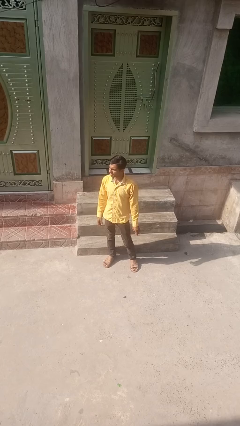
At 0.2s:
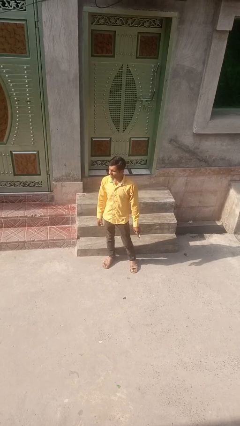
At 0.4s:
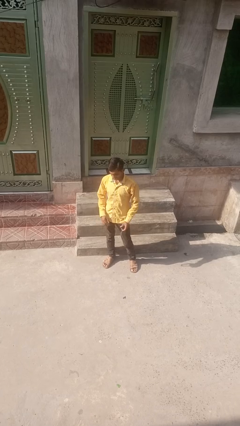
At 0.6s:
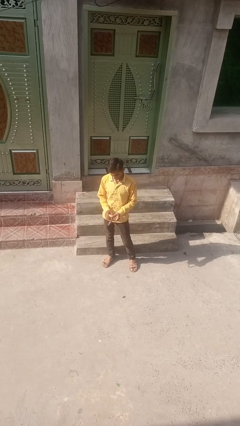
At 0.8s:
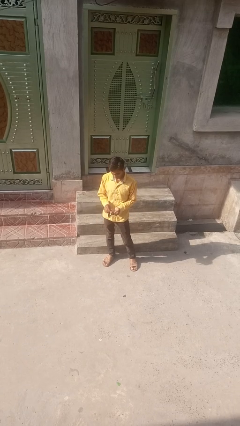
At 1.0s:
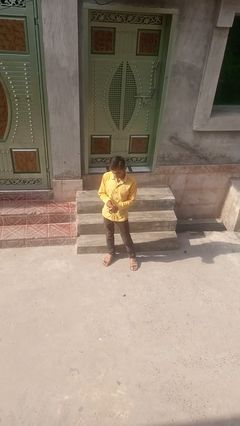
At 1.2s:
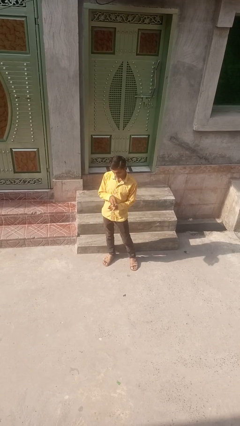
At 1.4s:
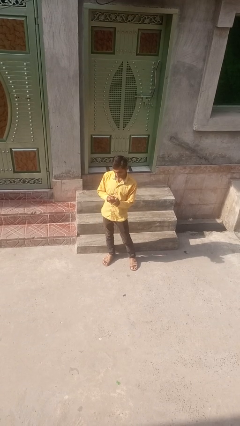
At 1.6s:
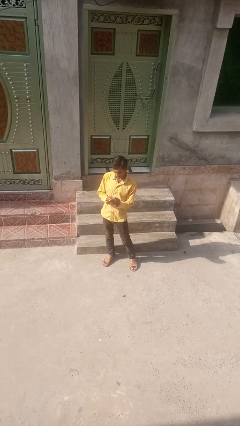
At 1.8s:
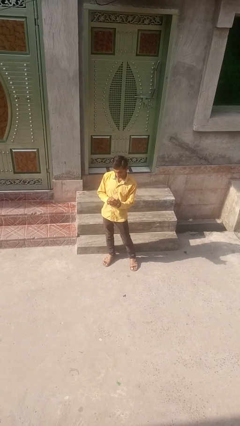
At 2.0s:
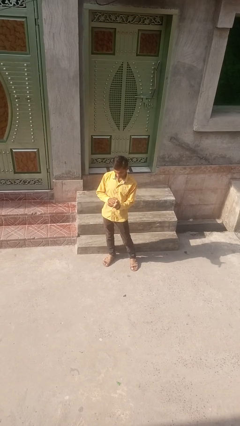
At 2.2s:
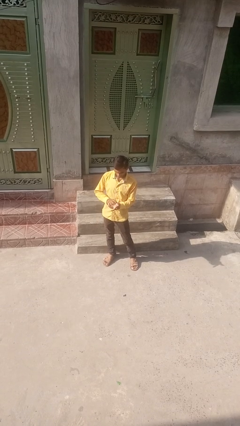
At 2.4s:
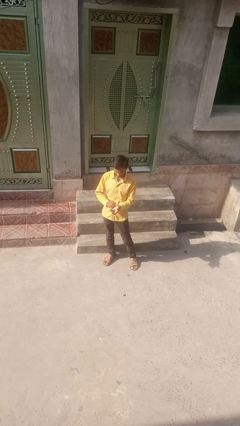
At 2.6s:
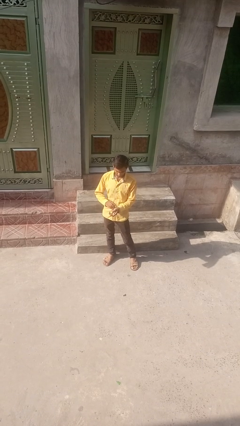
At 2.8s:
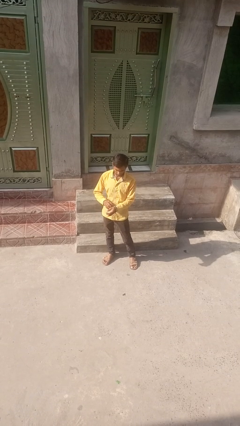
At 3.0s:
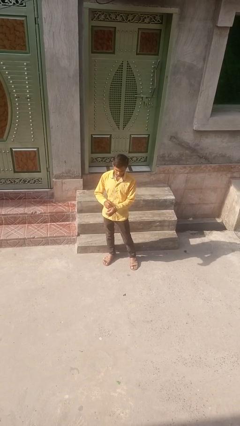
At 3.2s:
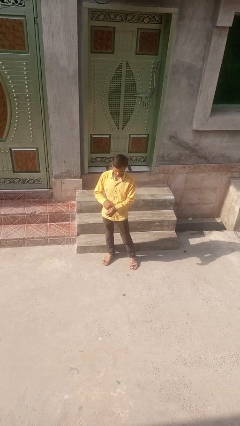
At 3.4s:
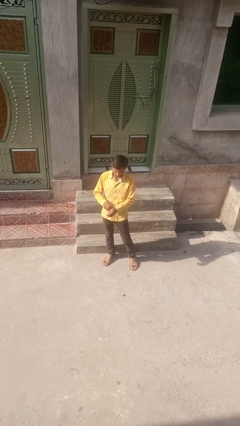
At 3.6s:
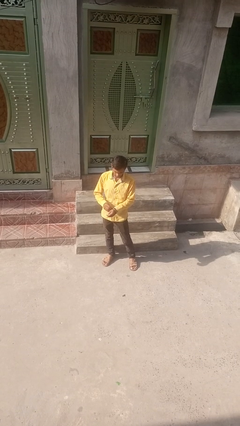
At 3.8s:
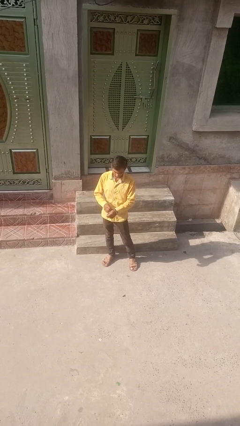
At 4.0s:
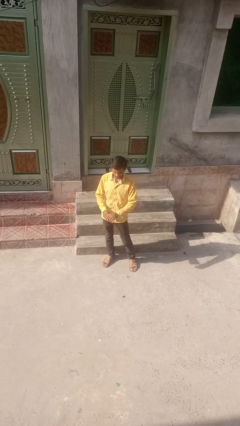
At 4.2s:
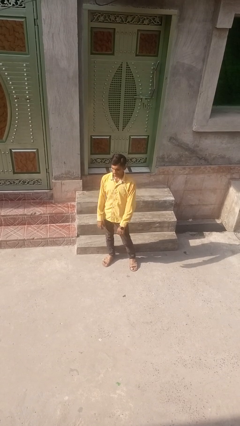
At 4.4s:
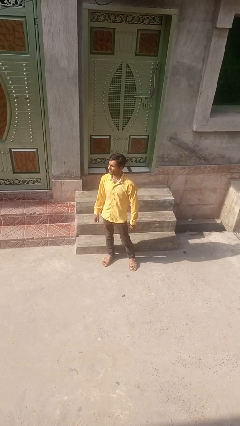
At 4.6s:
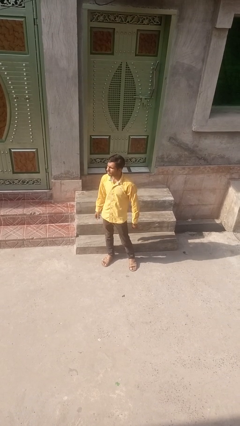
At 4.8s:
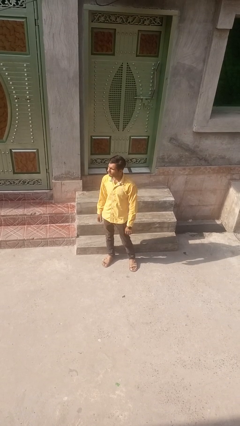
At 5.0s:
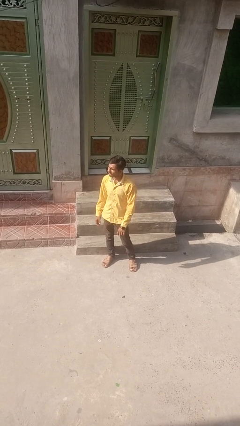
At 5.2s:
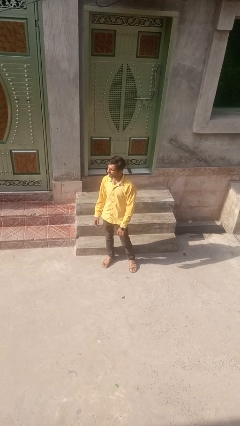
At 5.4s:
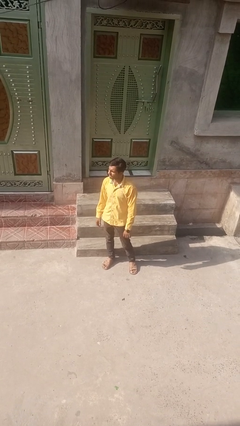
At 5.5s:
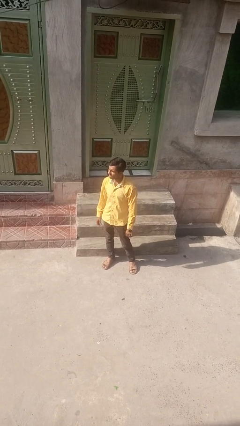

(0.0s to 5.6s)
person puts on wristwatch

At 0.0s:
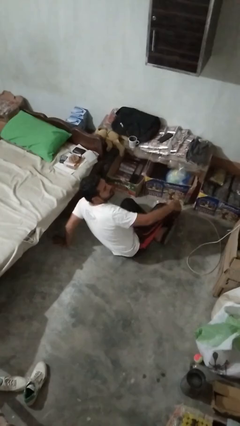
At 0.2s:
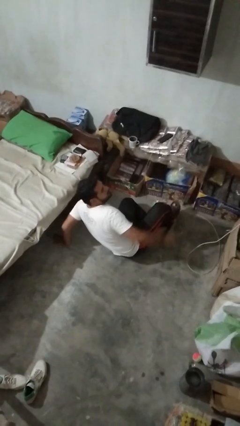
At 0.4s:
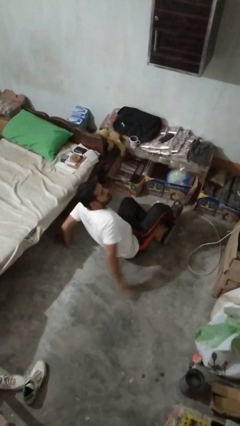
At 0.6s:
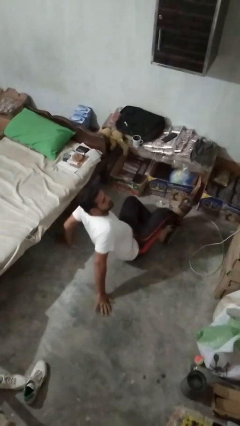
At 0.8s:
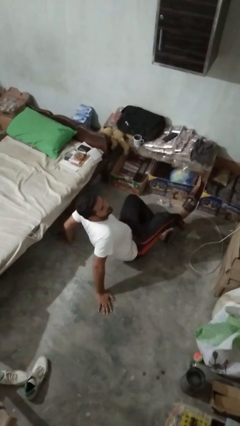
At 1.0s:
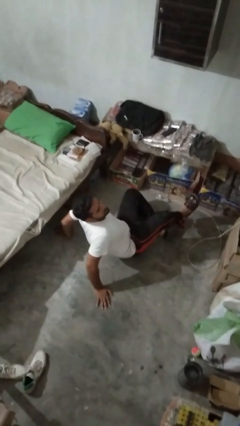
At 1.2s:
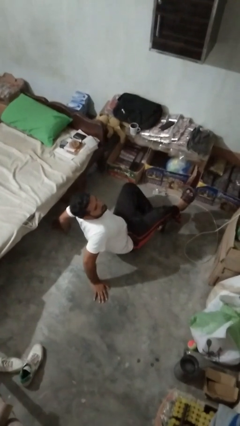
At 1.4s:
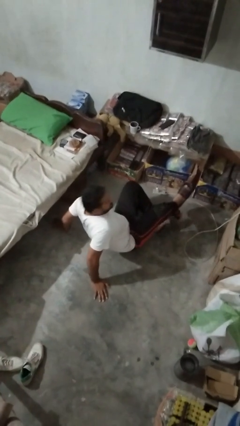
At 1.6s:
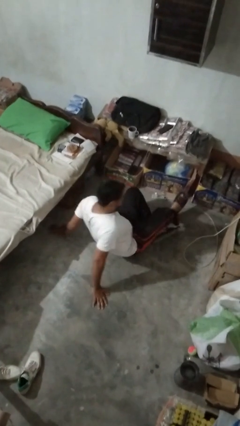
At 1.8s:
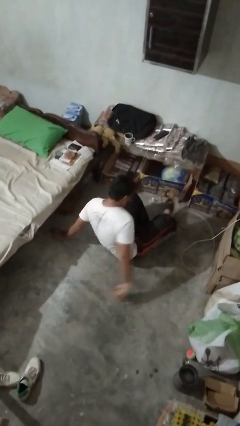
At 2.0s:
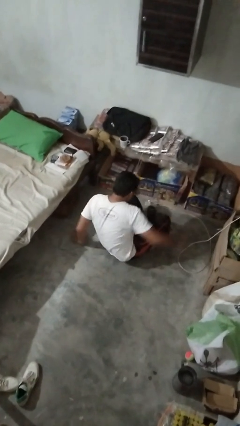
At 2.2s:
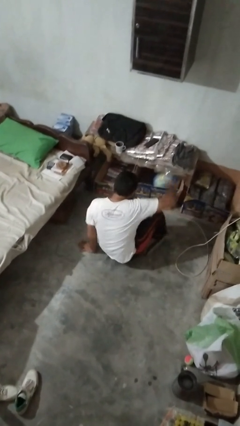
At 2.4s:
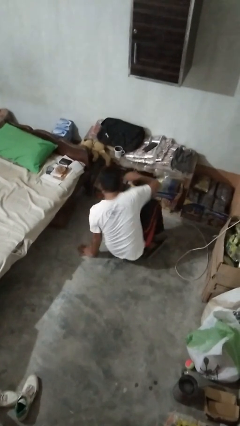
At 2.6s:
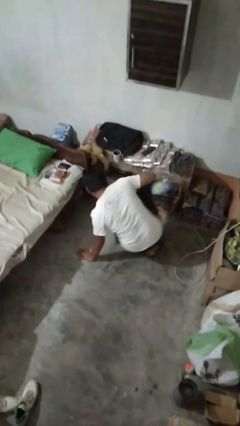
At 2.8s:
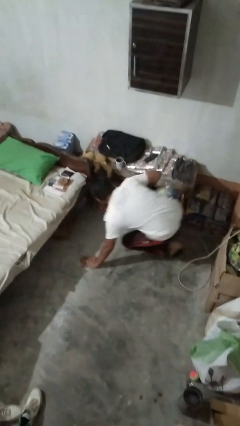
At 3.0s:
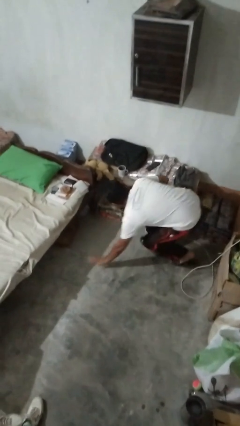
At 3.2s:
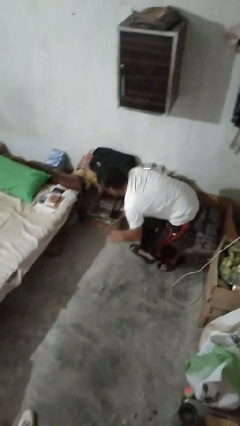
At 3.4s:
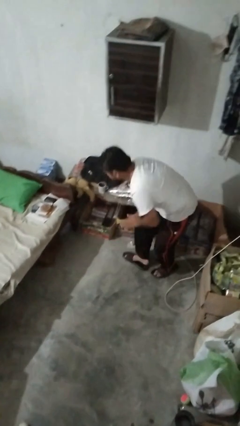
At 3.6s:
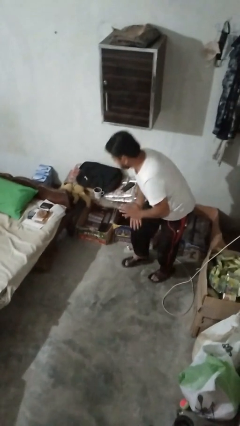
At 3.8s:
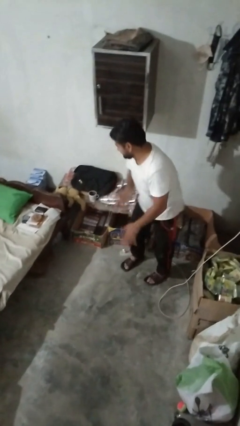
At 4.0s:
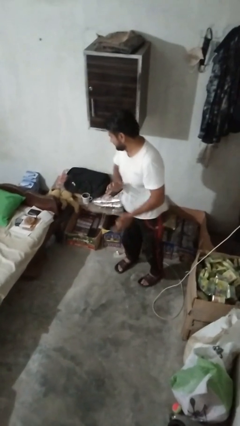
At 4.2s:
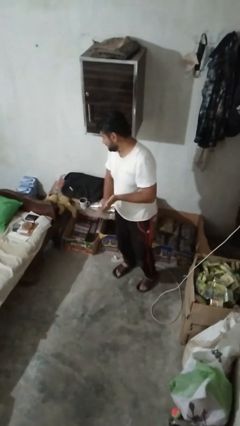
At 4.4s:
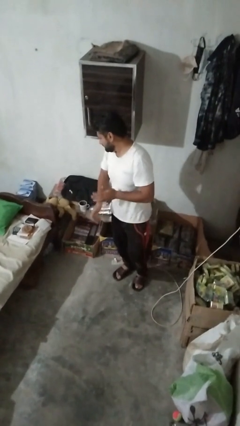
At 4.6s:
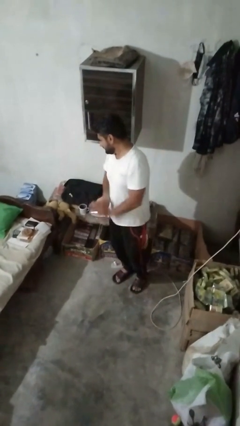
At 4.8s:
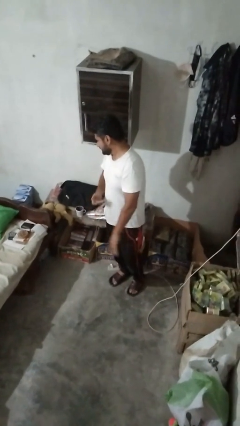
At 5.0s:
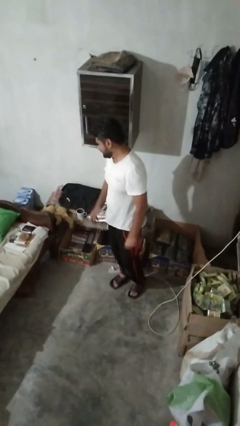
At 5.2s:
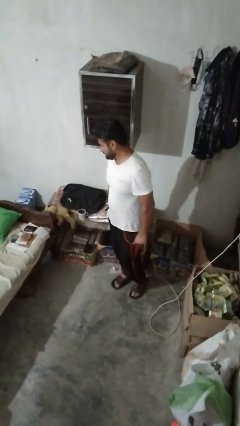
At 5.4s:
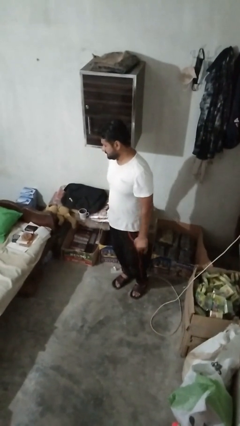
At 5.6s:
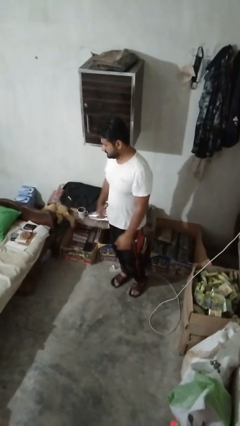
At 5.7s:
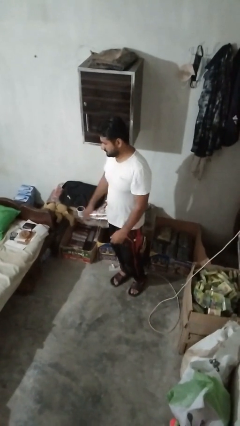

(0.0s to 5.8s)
person stands up from floor

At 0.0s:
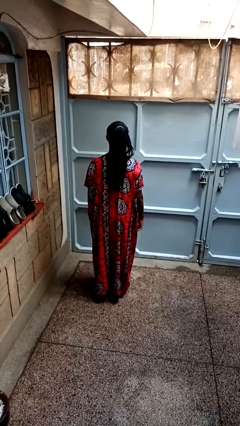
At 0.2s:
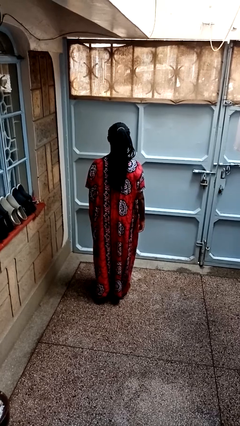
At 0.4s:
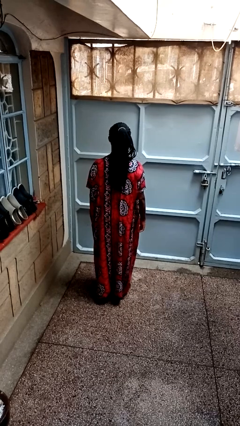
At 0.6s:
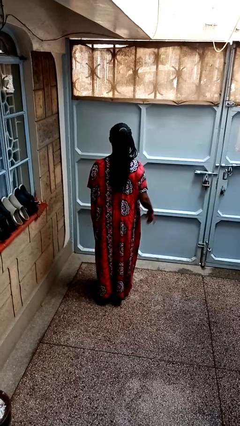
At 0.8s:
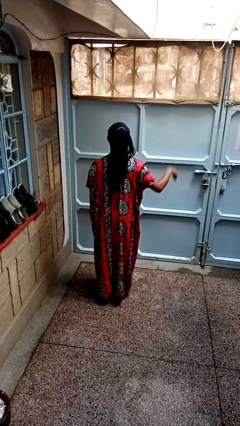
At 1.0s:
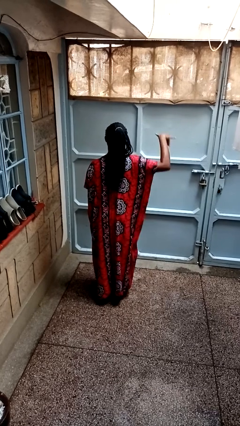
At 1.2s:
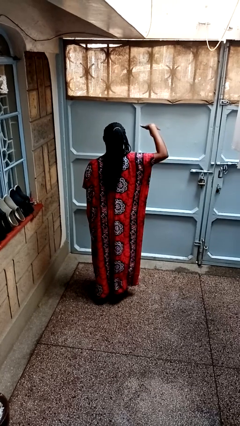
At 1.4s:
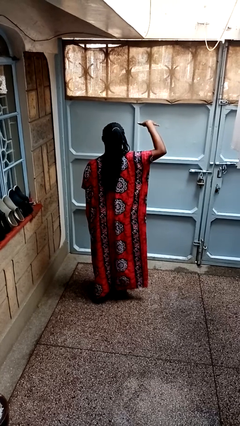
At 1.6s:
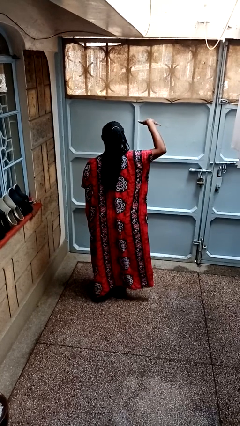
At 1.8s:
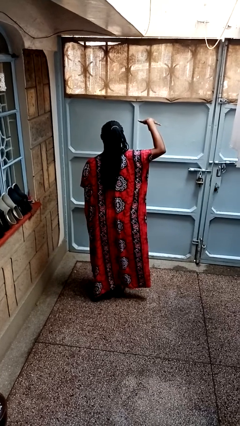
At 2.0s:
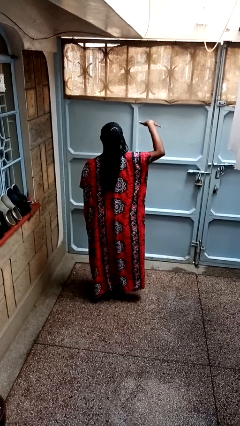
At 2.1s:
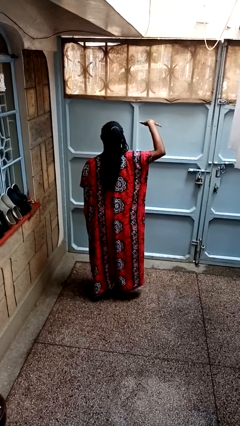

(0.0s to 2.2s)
person gestures hang loose

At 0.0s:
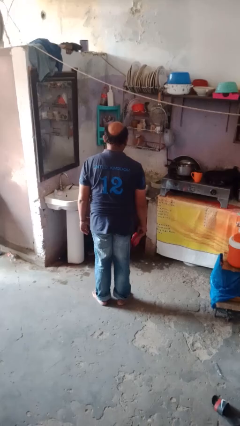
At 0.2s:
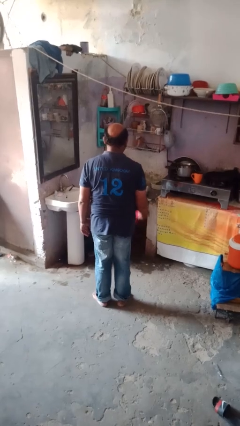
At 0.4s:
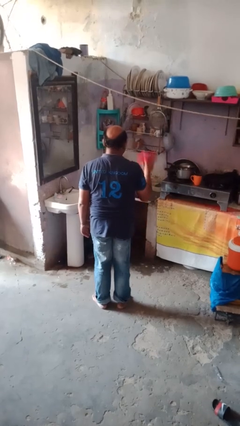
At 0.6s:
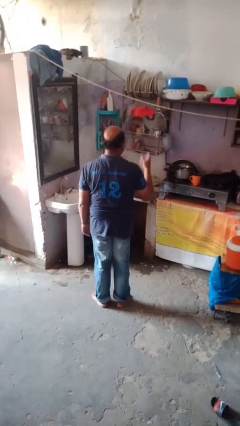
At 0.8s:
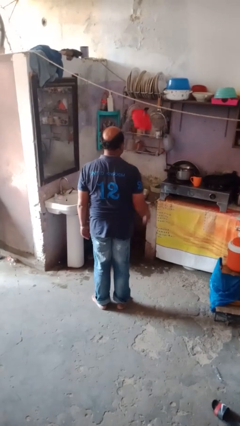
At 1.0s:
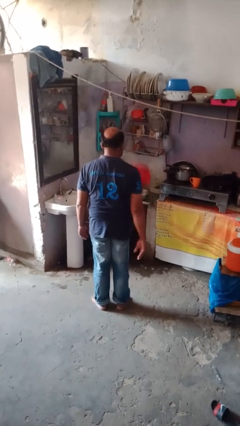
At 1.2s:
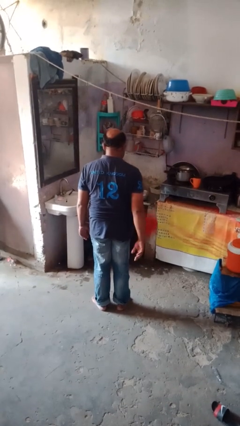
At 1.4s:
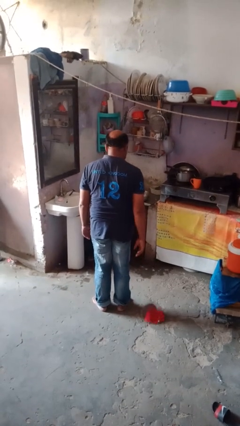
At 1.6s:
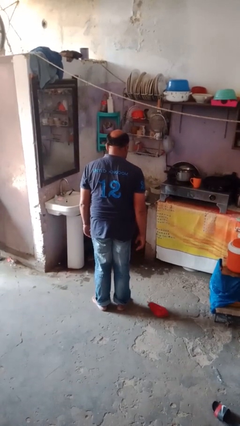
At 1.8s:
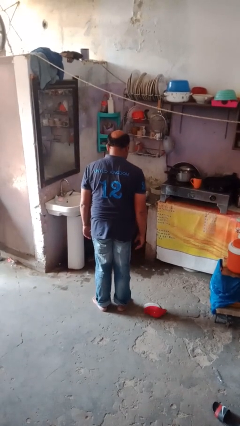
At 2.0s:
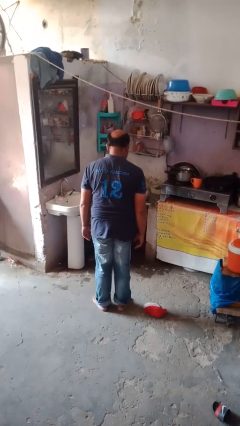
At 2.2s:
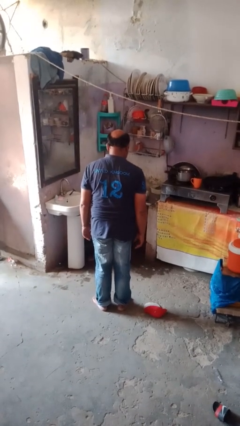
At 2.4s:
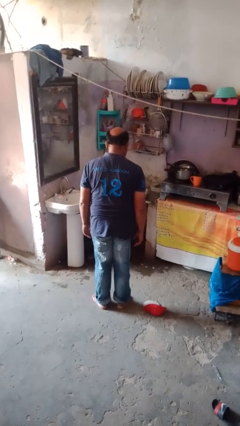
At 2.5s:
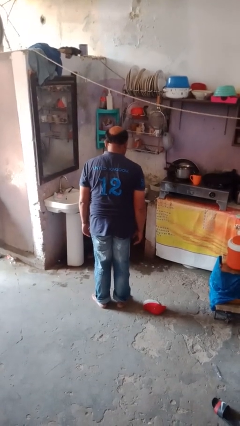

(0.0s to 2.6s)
person throws object into air

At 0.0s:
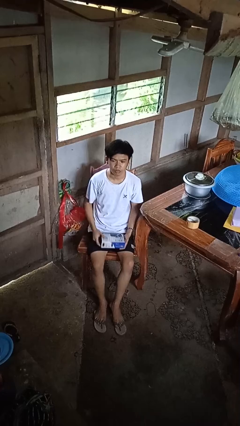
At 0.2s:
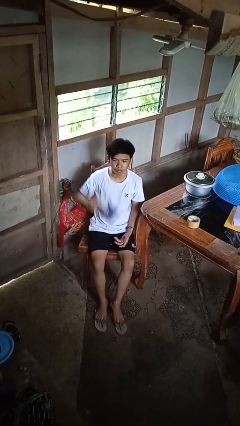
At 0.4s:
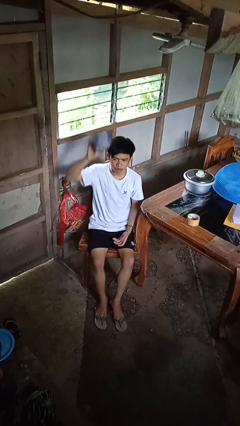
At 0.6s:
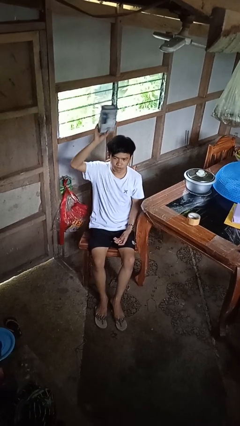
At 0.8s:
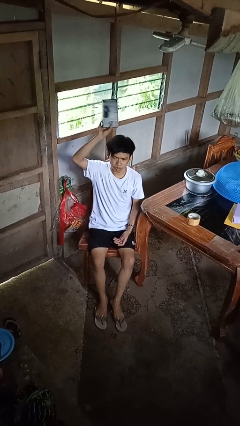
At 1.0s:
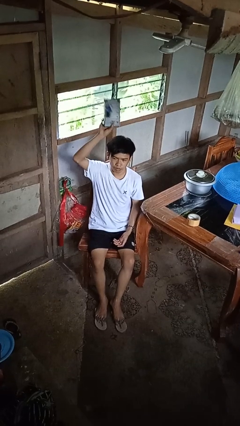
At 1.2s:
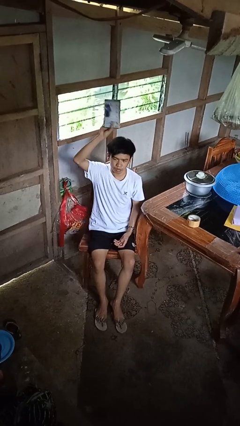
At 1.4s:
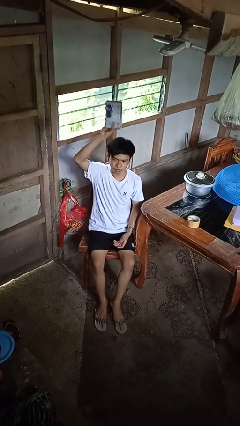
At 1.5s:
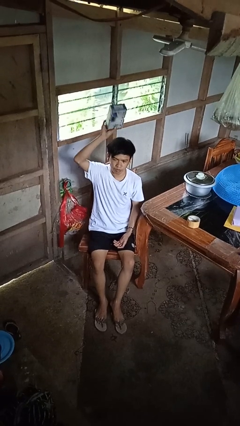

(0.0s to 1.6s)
person holds object above head
